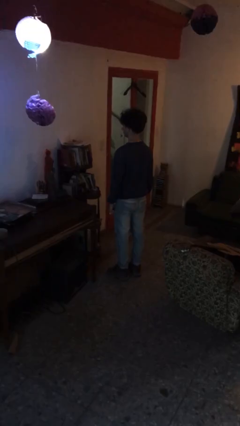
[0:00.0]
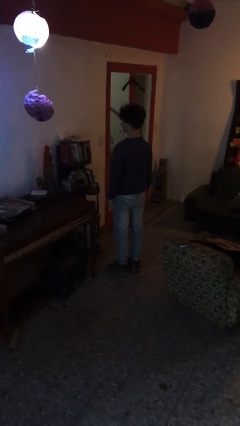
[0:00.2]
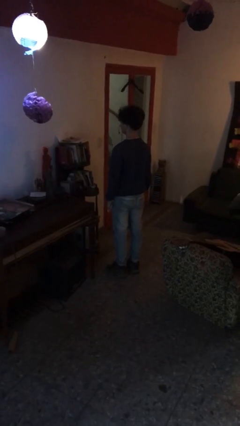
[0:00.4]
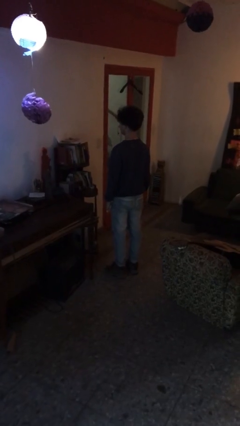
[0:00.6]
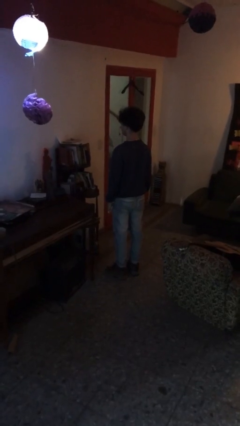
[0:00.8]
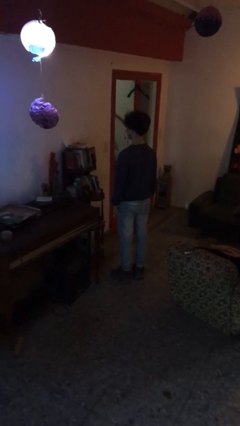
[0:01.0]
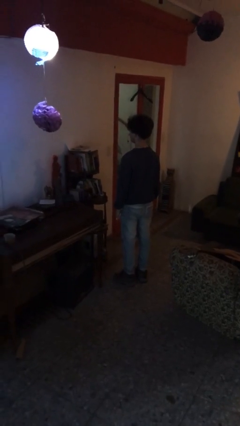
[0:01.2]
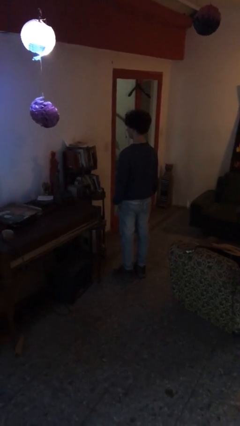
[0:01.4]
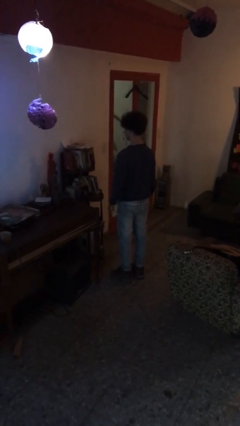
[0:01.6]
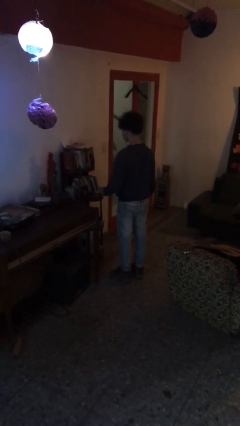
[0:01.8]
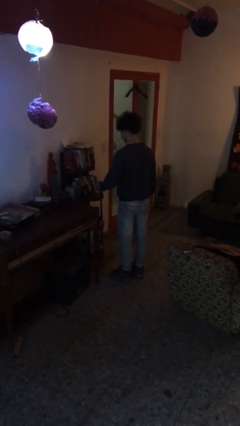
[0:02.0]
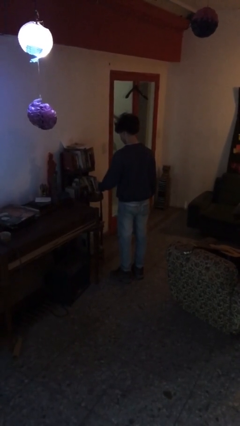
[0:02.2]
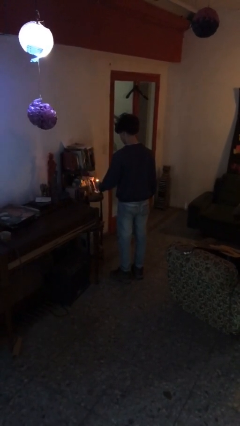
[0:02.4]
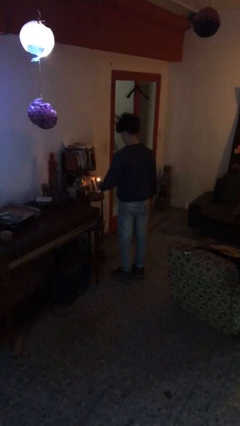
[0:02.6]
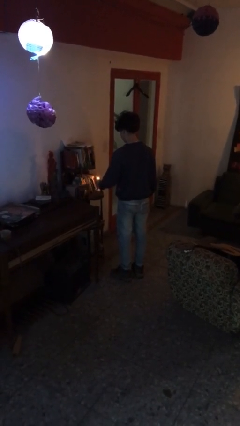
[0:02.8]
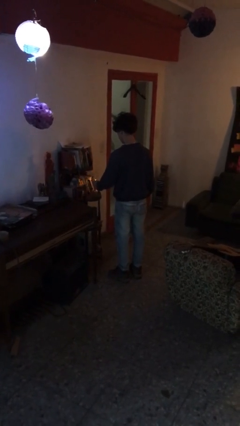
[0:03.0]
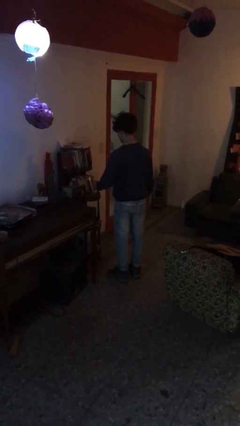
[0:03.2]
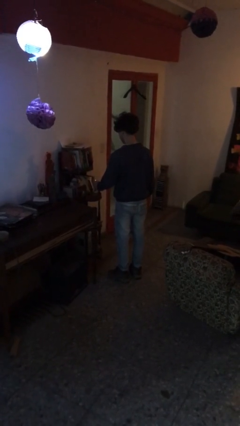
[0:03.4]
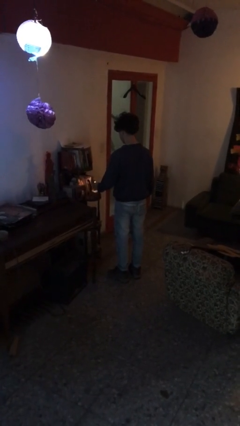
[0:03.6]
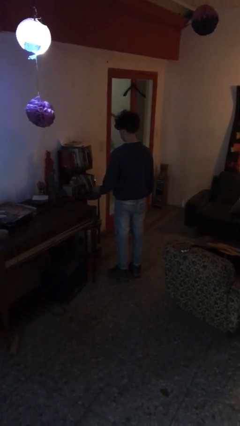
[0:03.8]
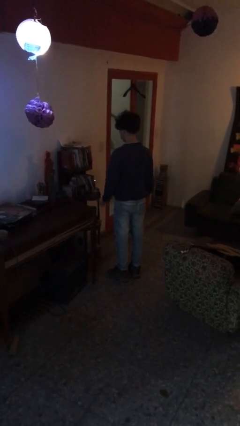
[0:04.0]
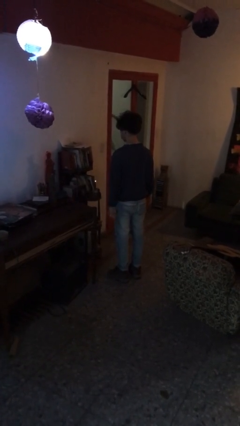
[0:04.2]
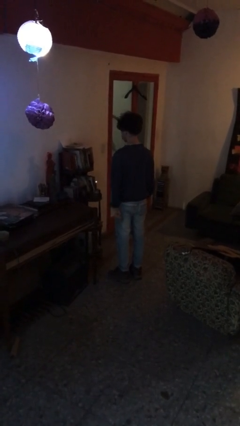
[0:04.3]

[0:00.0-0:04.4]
person lights candle

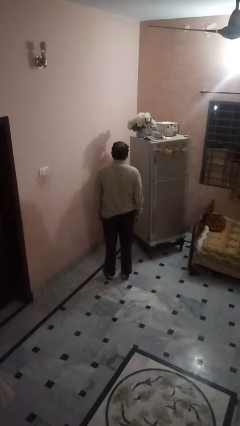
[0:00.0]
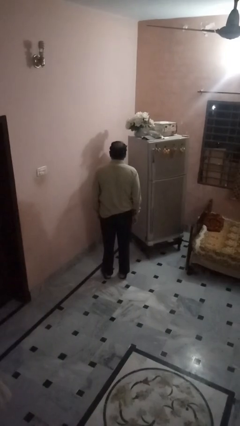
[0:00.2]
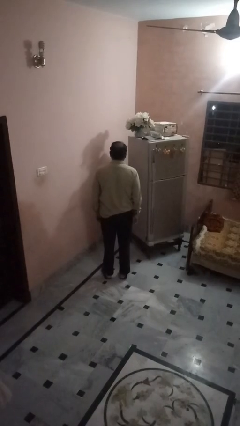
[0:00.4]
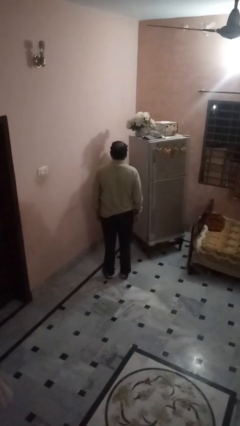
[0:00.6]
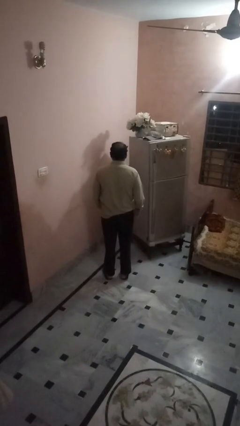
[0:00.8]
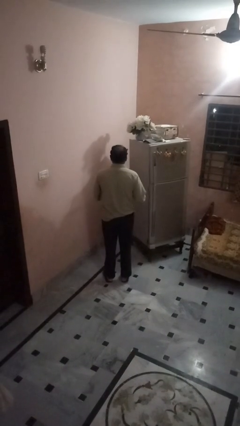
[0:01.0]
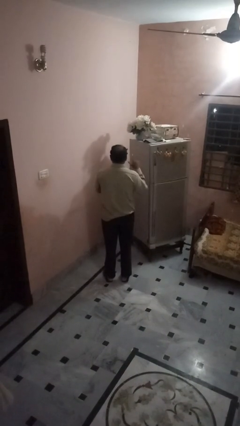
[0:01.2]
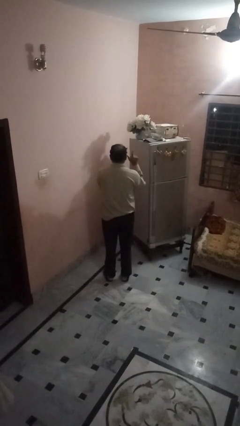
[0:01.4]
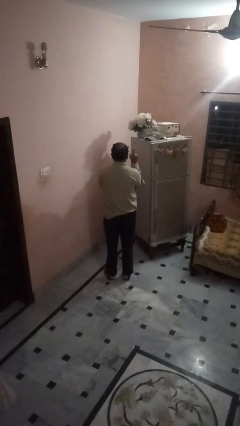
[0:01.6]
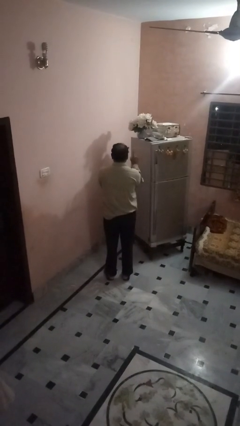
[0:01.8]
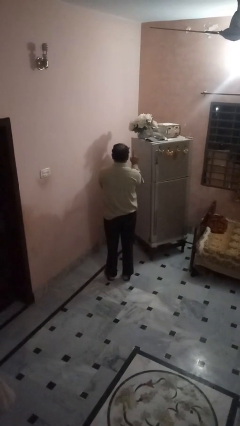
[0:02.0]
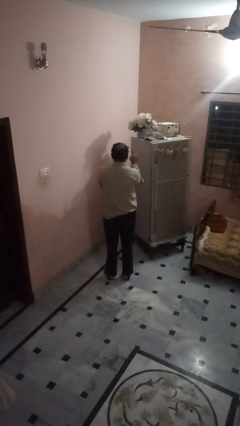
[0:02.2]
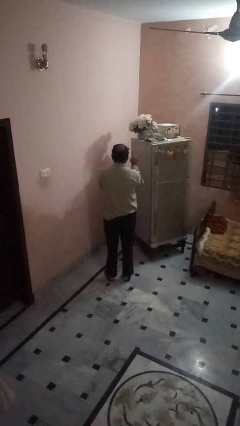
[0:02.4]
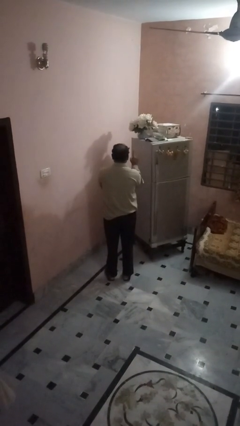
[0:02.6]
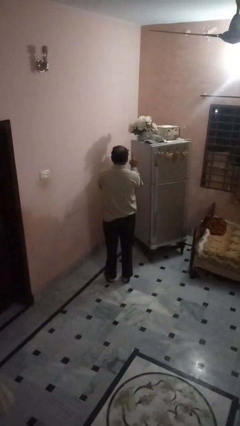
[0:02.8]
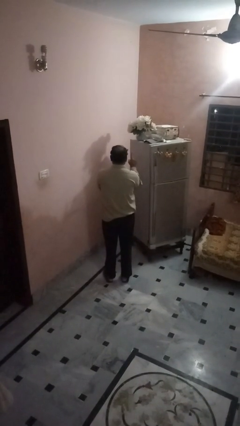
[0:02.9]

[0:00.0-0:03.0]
person gestures number one

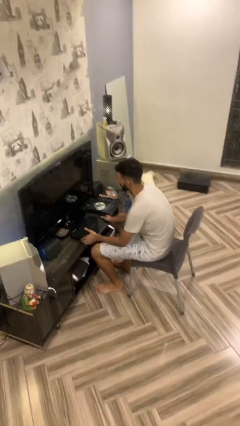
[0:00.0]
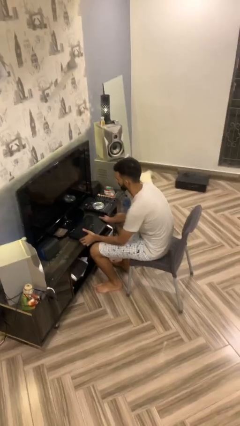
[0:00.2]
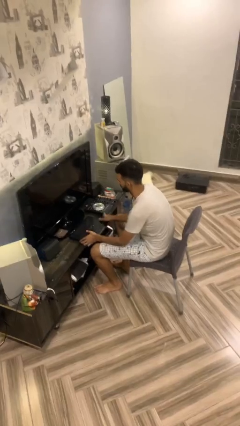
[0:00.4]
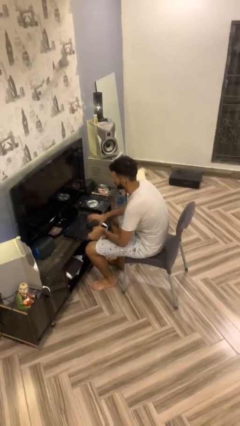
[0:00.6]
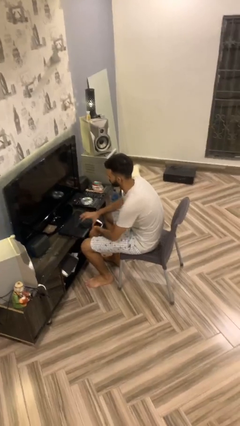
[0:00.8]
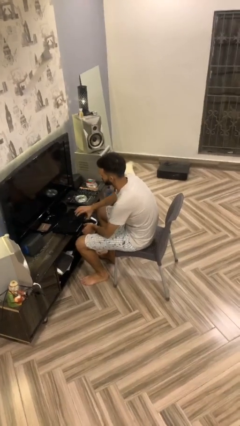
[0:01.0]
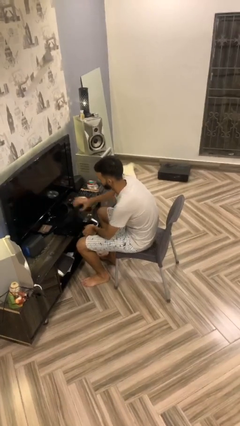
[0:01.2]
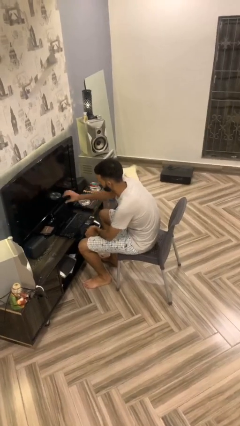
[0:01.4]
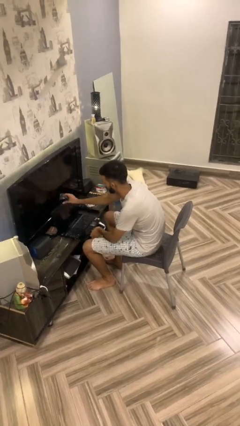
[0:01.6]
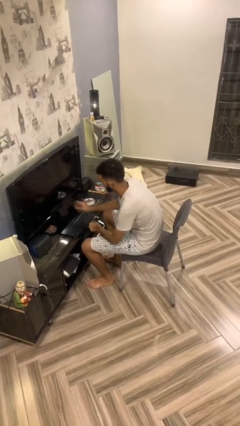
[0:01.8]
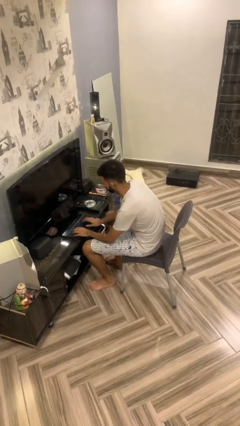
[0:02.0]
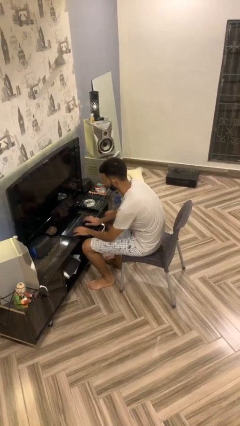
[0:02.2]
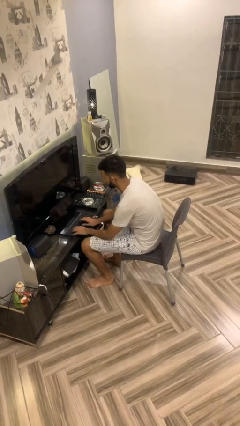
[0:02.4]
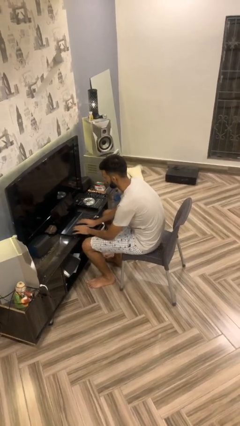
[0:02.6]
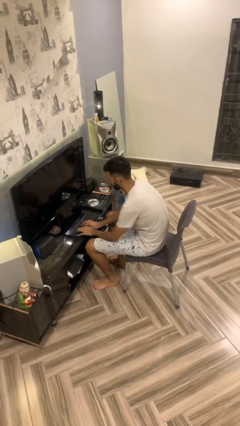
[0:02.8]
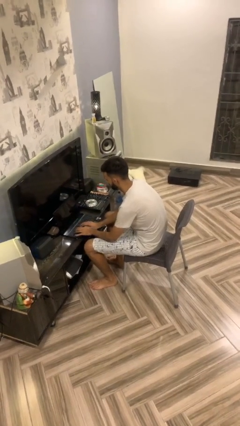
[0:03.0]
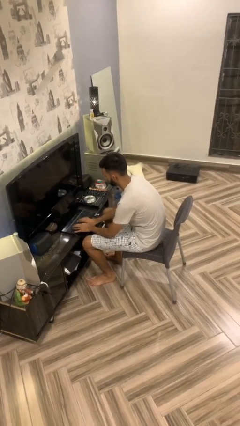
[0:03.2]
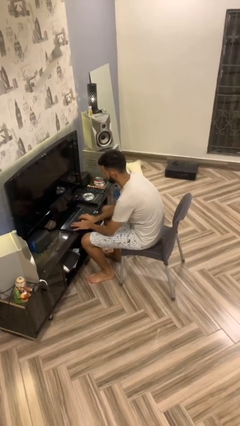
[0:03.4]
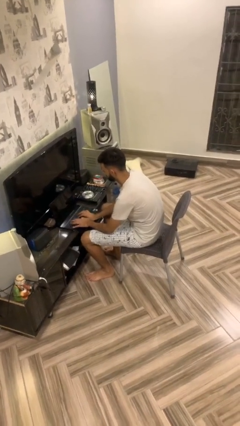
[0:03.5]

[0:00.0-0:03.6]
person interacts with laptop

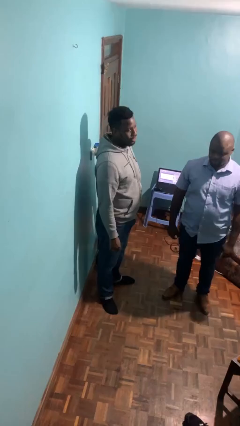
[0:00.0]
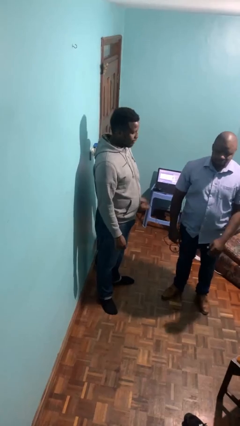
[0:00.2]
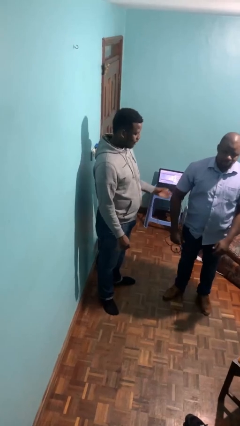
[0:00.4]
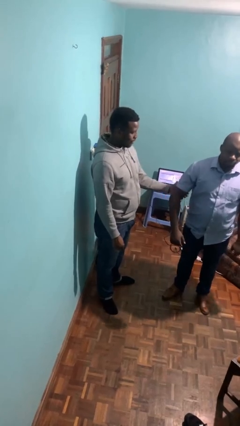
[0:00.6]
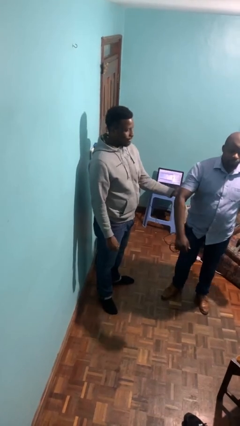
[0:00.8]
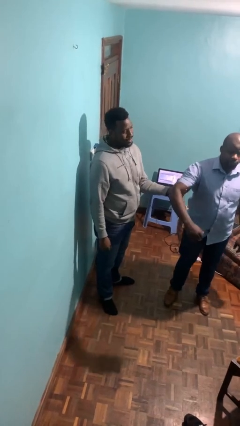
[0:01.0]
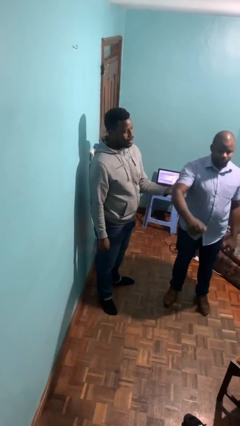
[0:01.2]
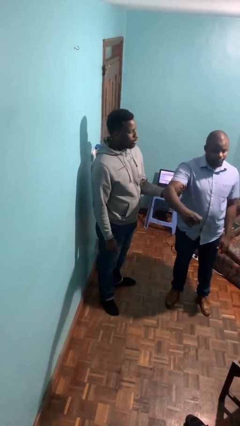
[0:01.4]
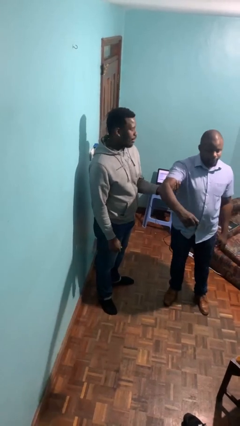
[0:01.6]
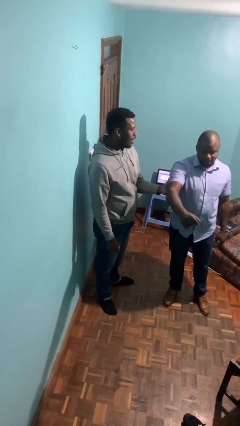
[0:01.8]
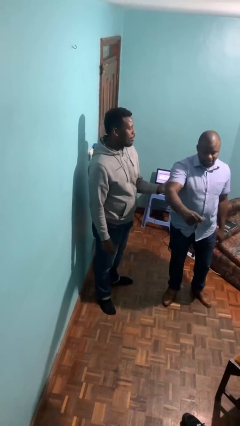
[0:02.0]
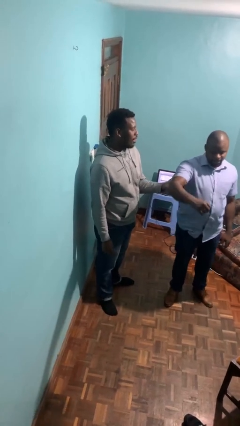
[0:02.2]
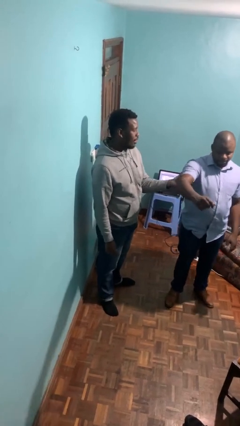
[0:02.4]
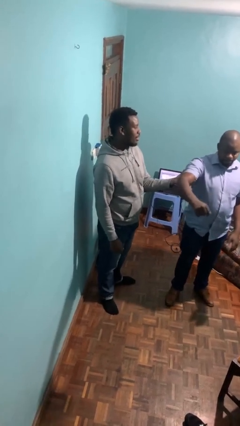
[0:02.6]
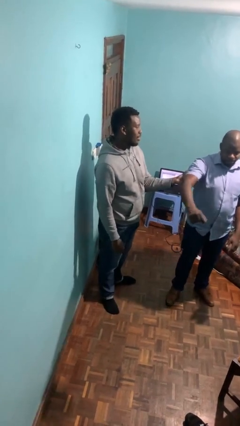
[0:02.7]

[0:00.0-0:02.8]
person grabs person by forearm

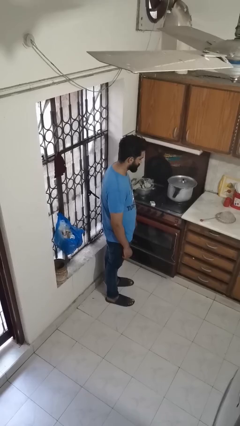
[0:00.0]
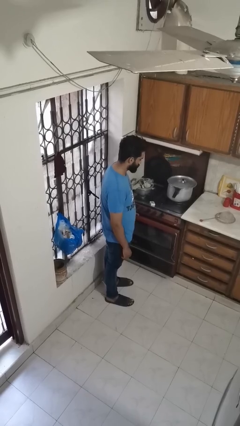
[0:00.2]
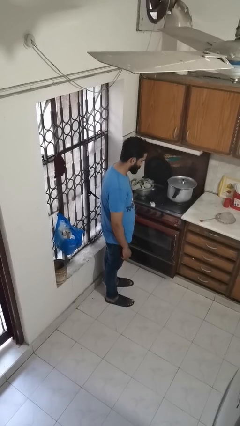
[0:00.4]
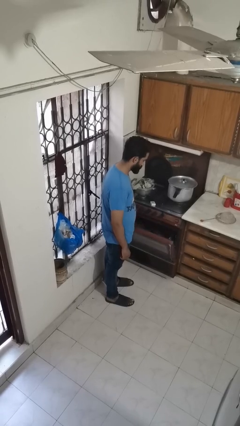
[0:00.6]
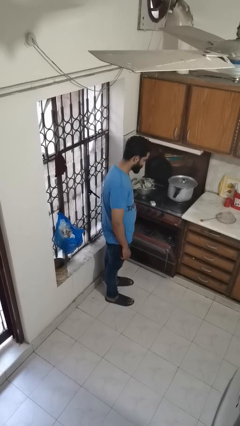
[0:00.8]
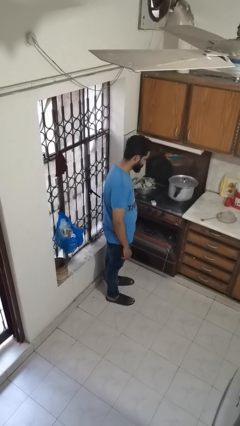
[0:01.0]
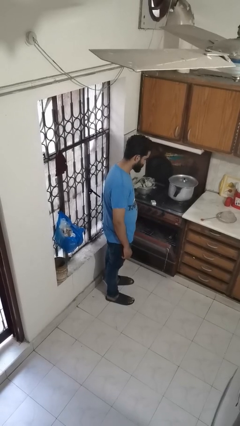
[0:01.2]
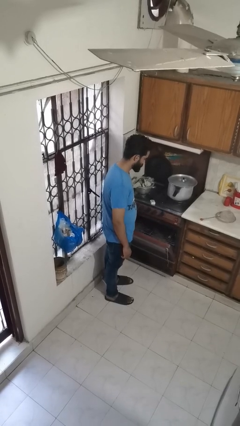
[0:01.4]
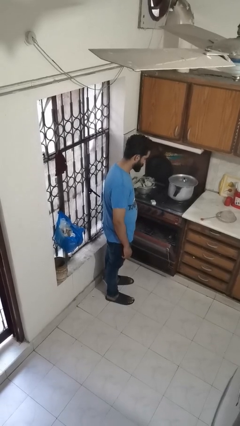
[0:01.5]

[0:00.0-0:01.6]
person opens oven door

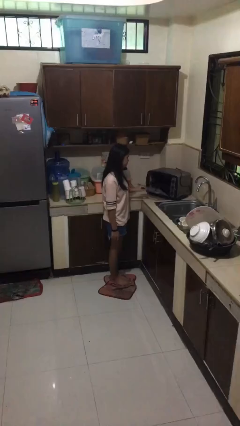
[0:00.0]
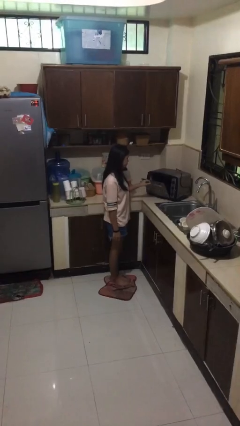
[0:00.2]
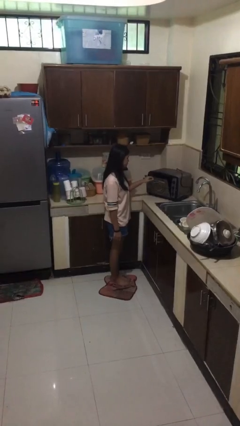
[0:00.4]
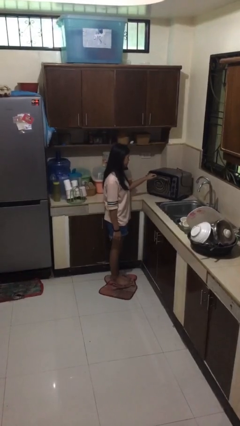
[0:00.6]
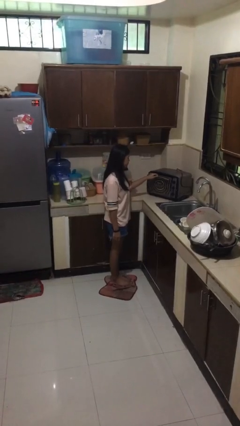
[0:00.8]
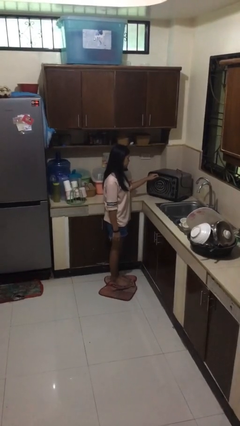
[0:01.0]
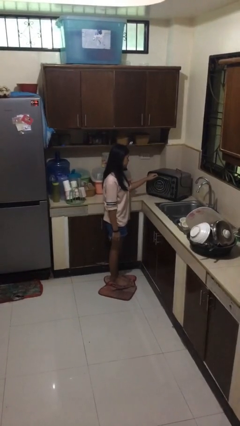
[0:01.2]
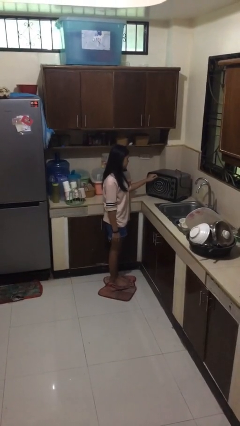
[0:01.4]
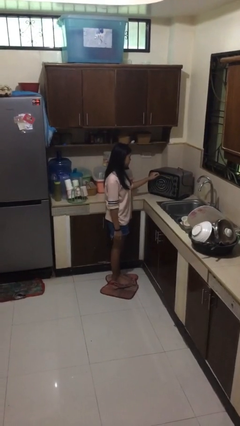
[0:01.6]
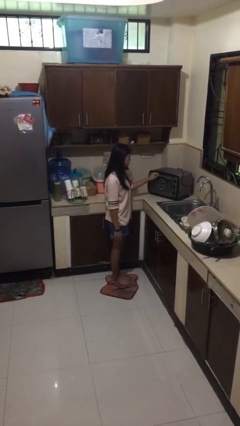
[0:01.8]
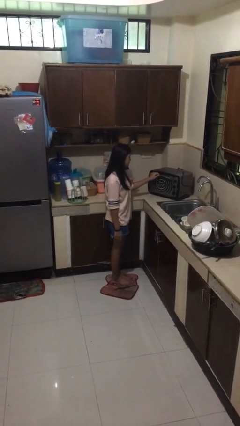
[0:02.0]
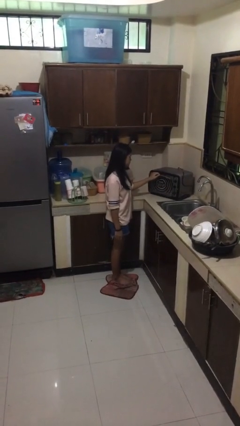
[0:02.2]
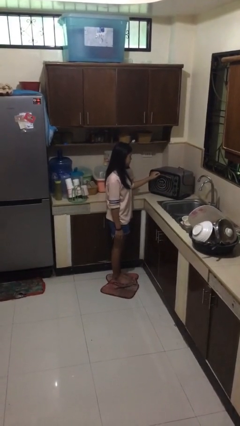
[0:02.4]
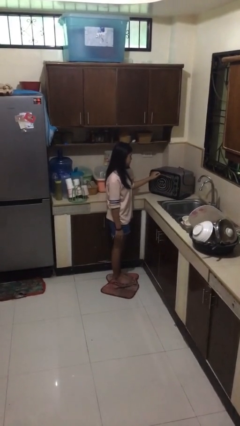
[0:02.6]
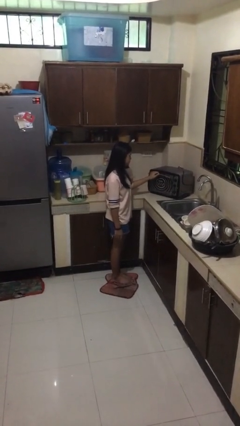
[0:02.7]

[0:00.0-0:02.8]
person closes microwave
